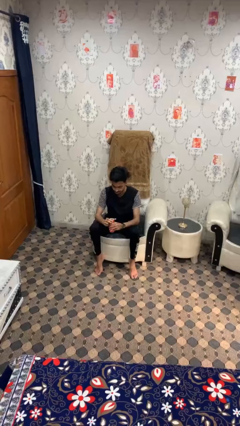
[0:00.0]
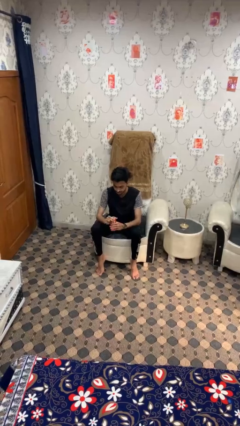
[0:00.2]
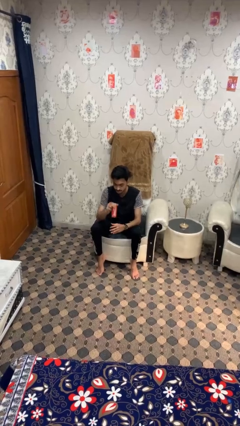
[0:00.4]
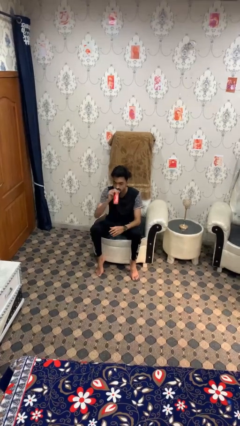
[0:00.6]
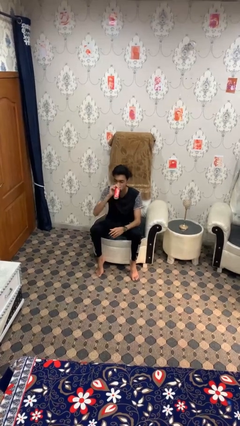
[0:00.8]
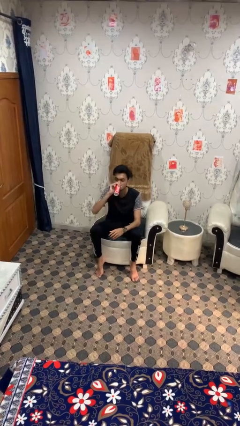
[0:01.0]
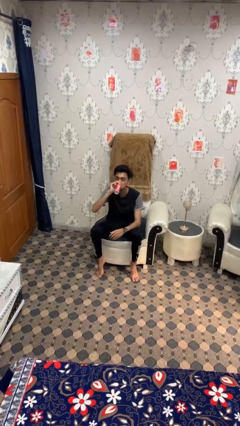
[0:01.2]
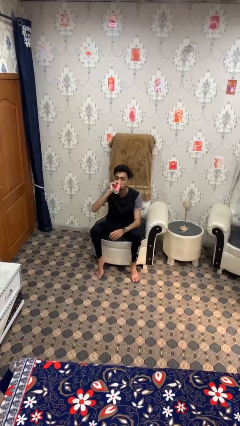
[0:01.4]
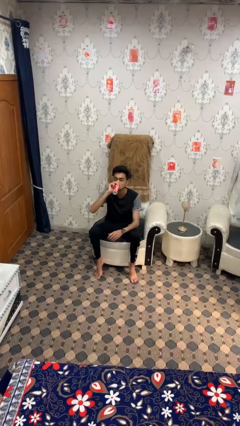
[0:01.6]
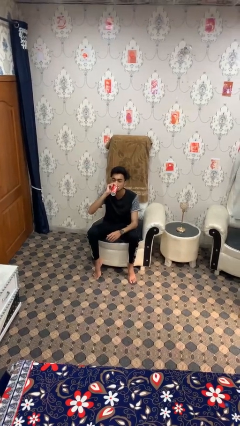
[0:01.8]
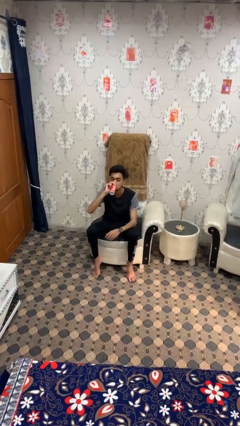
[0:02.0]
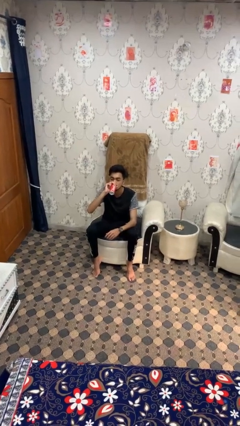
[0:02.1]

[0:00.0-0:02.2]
person drinks from beverage can

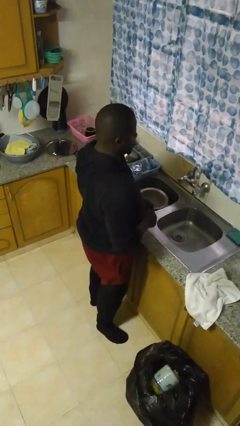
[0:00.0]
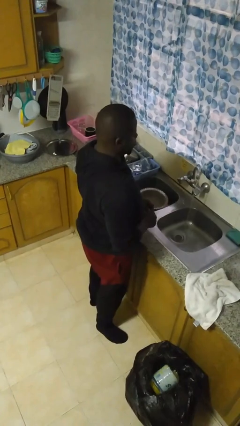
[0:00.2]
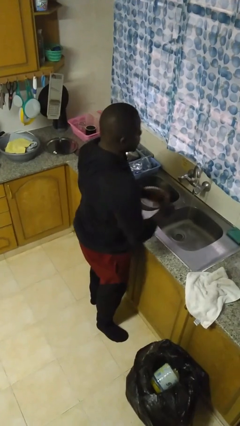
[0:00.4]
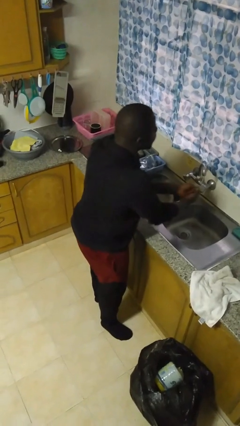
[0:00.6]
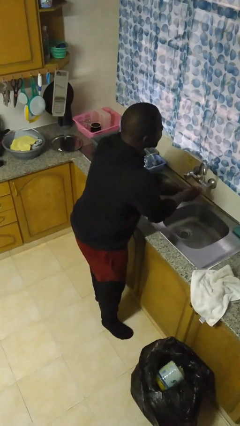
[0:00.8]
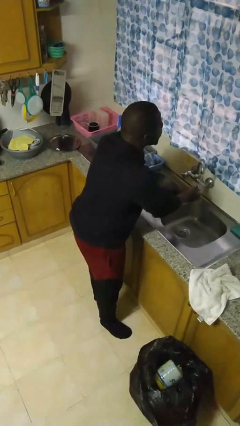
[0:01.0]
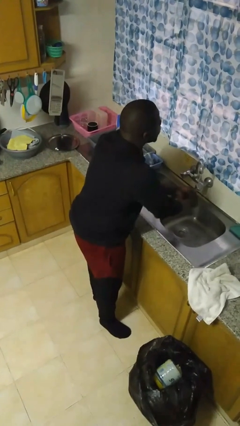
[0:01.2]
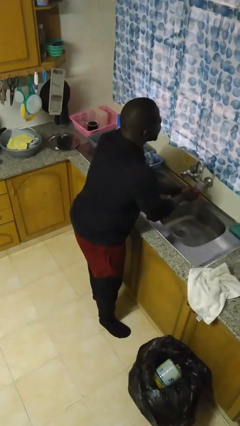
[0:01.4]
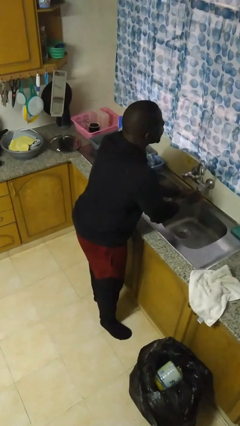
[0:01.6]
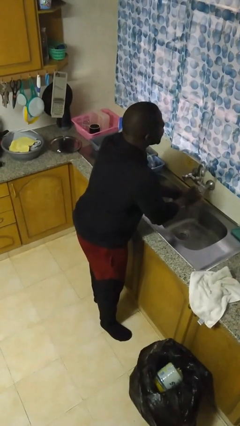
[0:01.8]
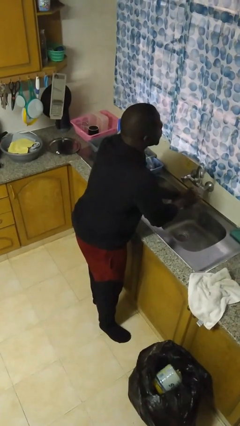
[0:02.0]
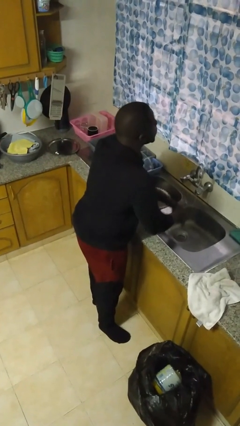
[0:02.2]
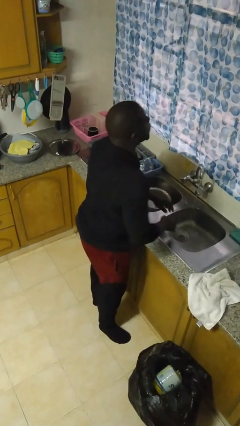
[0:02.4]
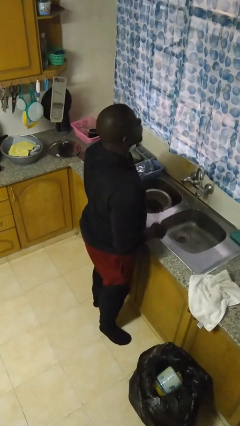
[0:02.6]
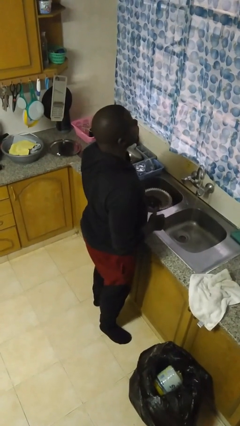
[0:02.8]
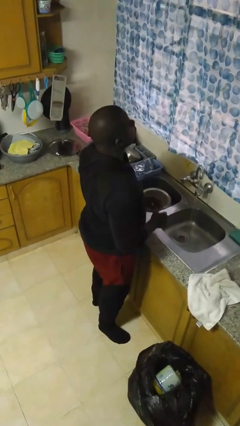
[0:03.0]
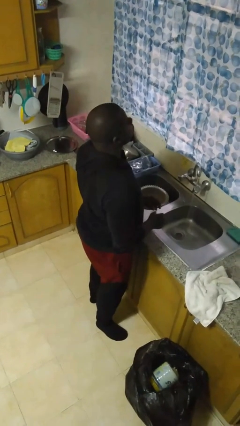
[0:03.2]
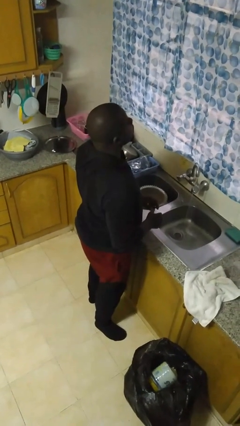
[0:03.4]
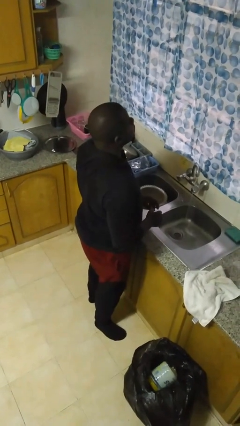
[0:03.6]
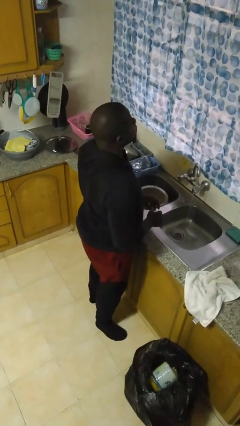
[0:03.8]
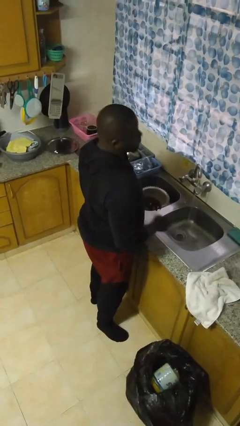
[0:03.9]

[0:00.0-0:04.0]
person washes hands

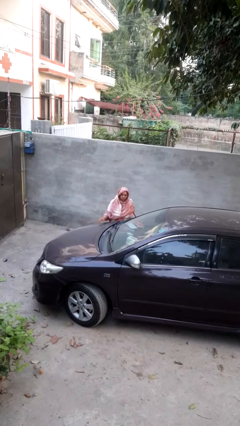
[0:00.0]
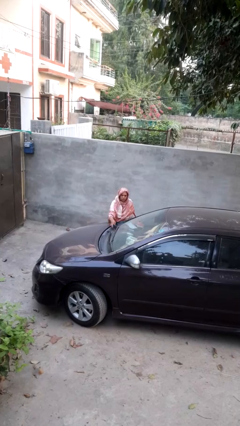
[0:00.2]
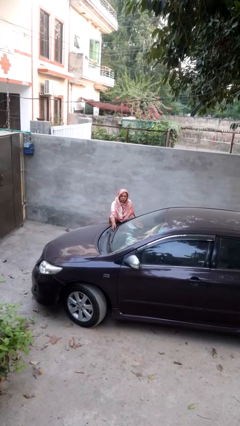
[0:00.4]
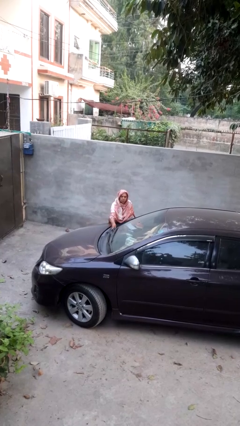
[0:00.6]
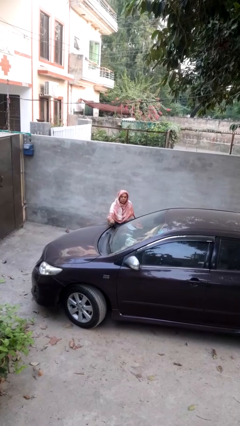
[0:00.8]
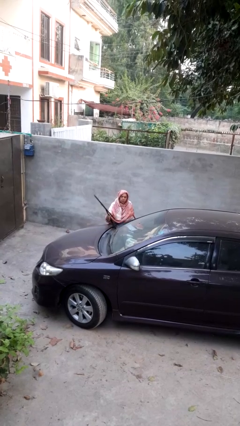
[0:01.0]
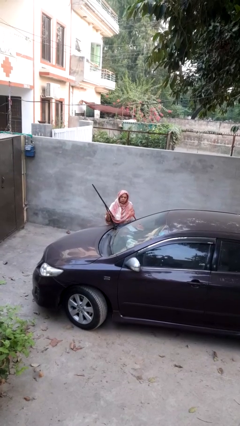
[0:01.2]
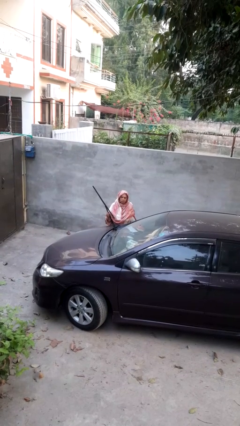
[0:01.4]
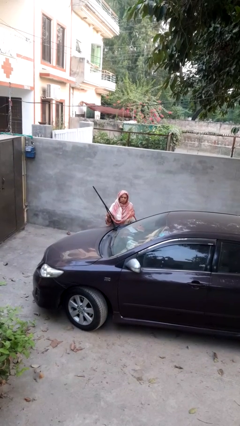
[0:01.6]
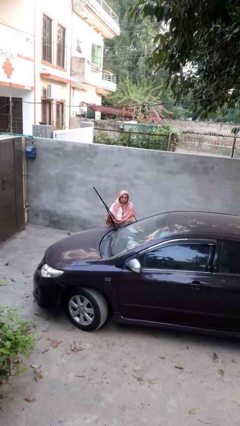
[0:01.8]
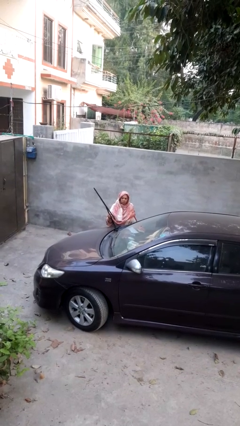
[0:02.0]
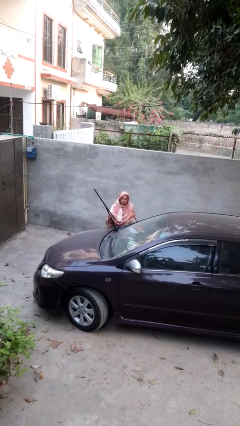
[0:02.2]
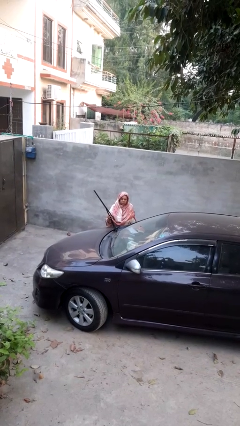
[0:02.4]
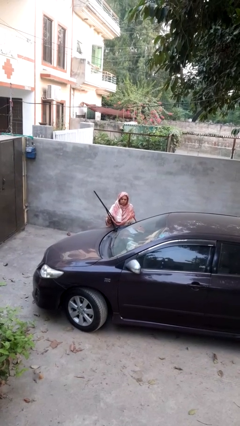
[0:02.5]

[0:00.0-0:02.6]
person flips up car wipers

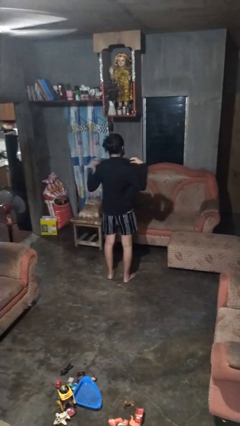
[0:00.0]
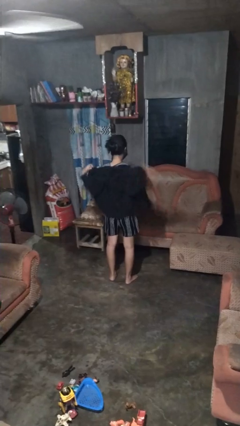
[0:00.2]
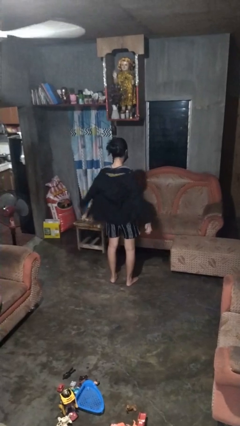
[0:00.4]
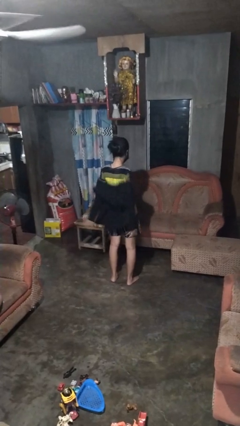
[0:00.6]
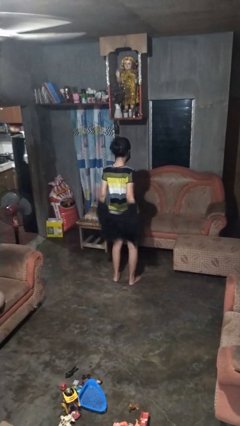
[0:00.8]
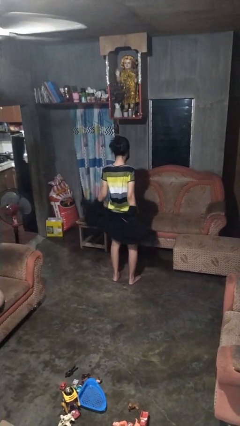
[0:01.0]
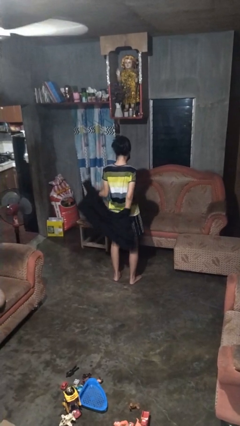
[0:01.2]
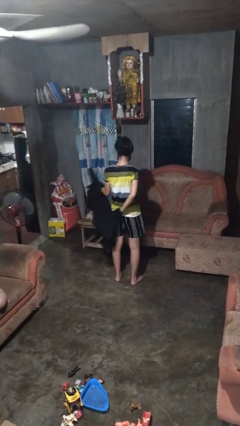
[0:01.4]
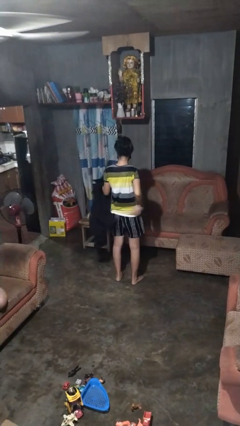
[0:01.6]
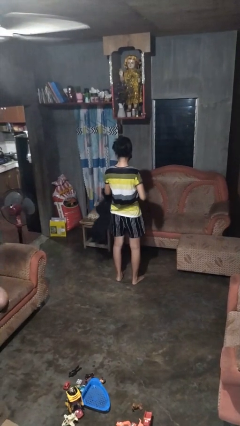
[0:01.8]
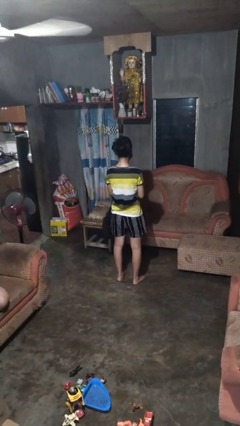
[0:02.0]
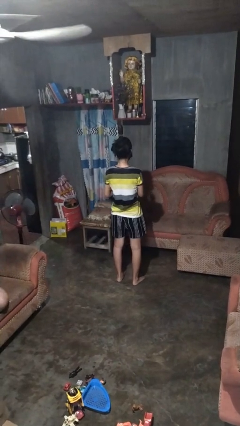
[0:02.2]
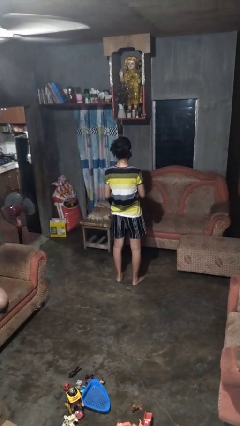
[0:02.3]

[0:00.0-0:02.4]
person takes off shirt

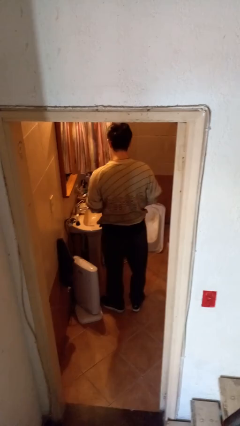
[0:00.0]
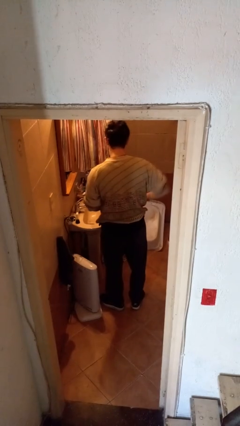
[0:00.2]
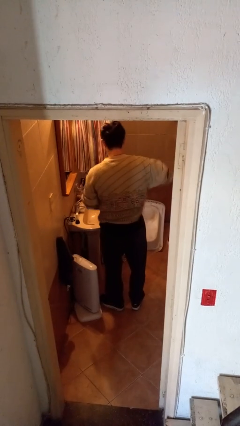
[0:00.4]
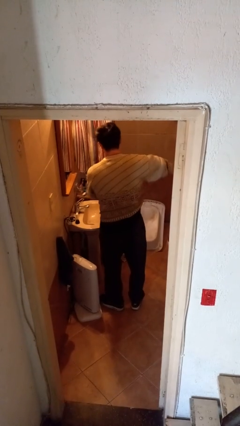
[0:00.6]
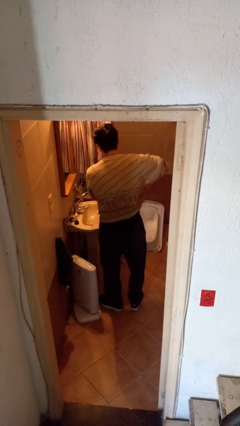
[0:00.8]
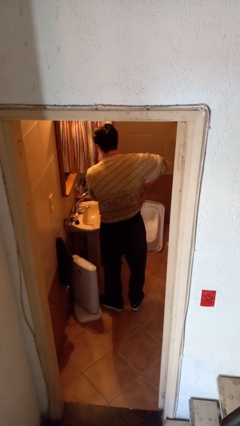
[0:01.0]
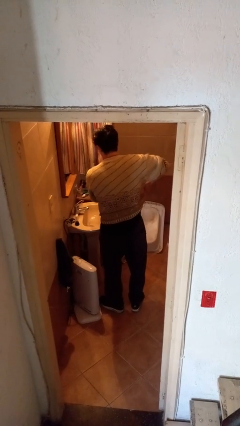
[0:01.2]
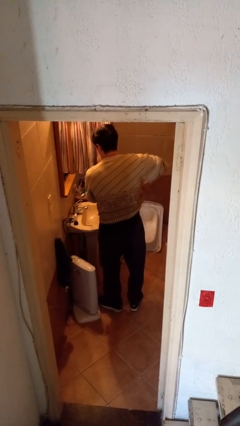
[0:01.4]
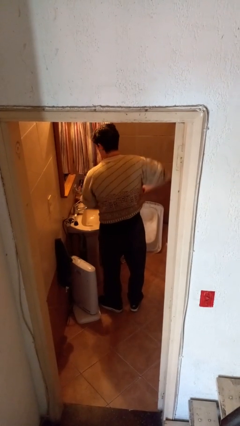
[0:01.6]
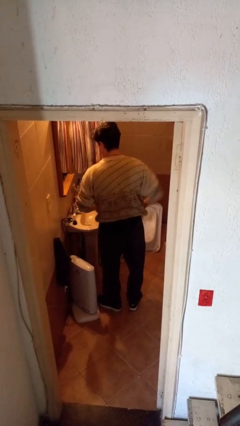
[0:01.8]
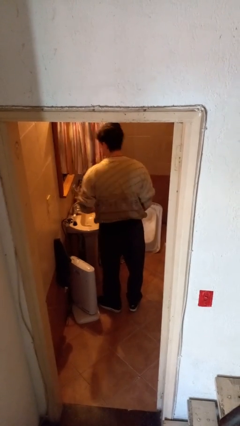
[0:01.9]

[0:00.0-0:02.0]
person applies deodorant

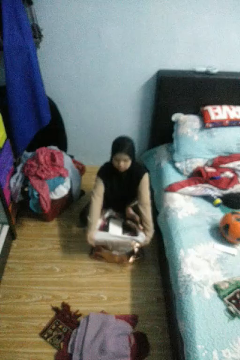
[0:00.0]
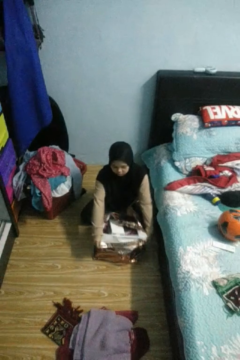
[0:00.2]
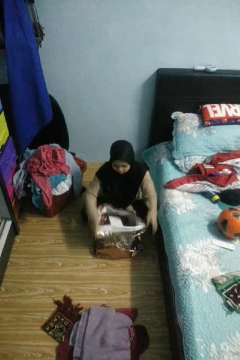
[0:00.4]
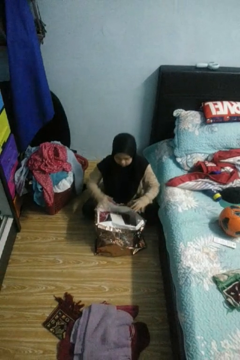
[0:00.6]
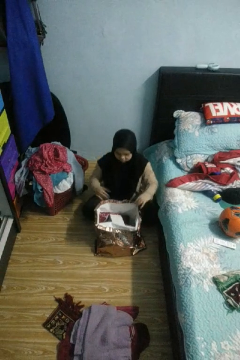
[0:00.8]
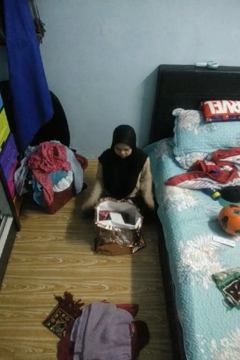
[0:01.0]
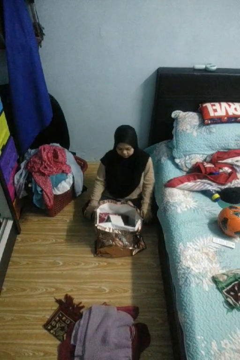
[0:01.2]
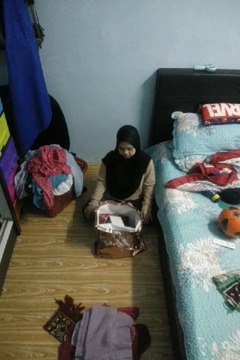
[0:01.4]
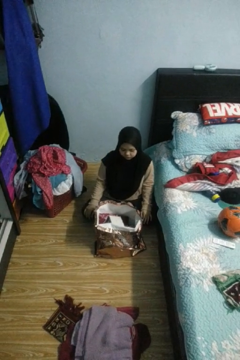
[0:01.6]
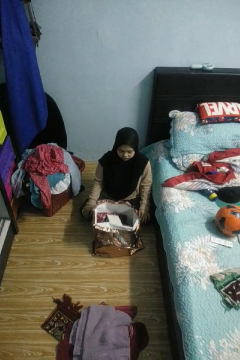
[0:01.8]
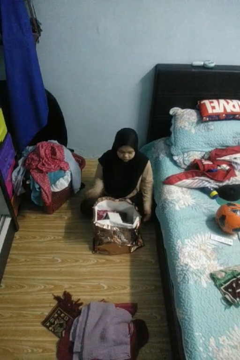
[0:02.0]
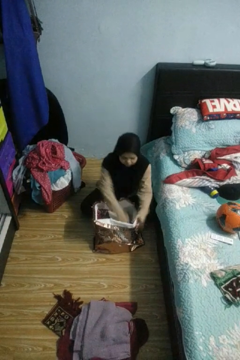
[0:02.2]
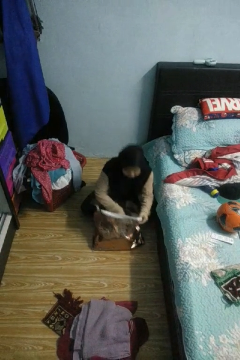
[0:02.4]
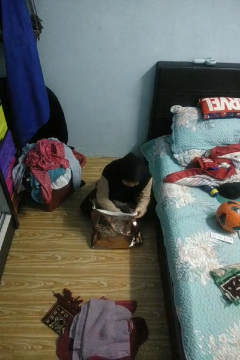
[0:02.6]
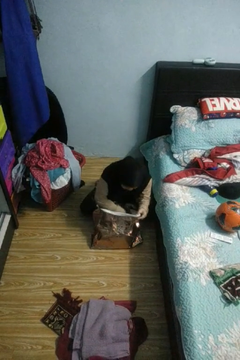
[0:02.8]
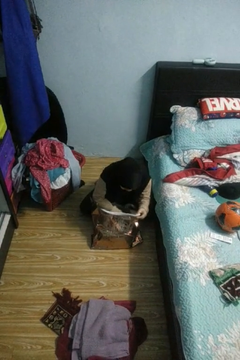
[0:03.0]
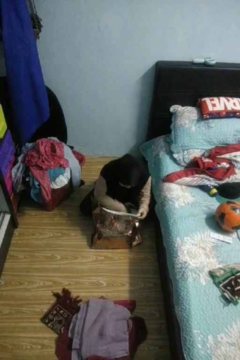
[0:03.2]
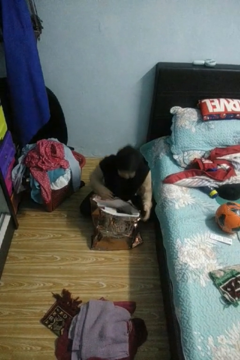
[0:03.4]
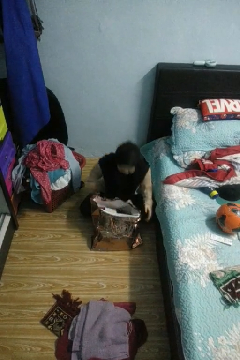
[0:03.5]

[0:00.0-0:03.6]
person searches in bag

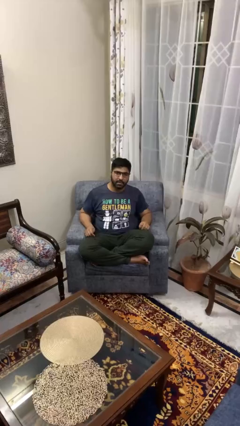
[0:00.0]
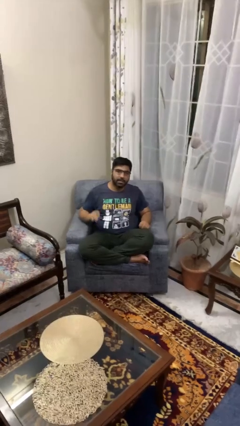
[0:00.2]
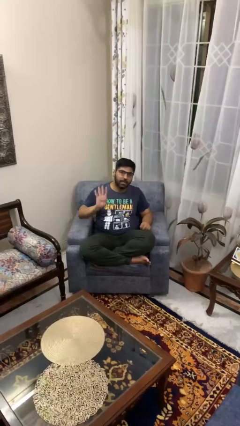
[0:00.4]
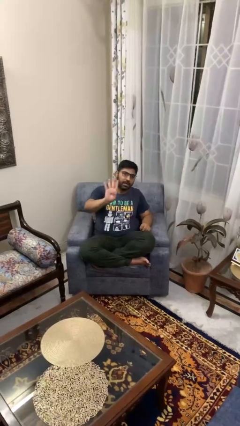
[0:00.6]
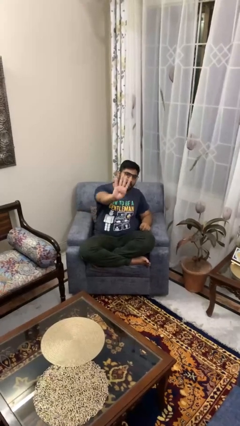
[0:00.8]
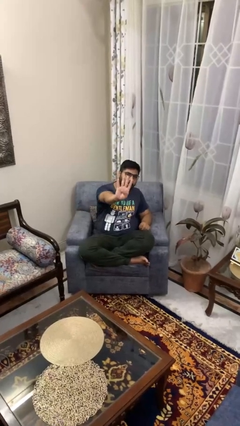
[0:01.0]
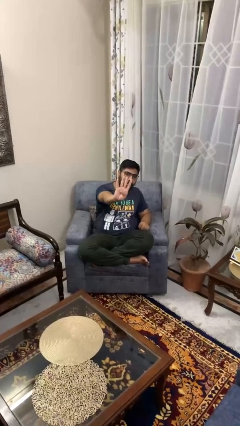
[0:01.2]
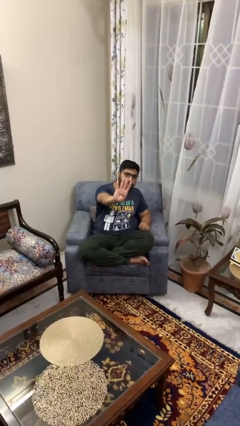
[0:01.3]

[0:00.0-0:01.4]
person gestures number four
